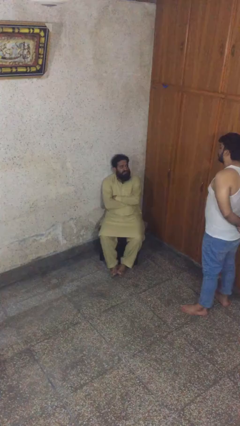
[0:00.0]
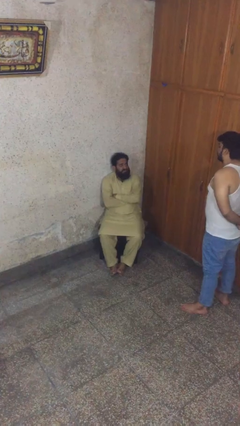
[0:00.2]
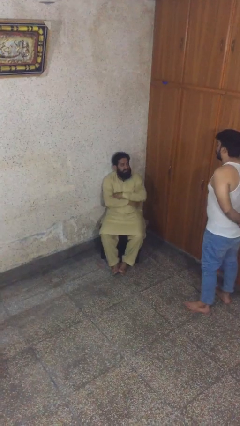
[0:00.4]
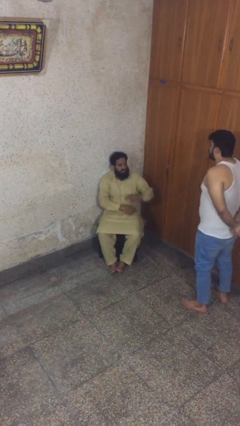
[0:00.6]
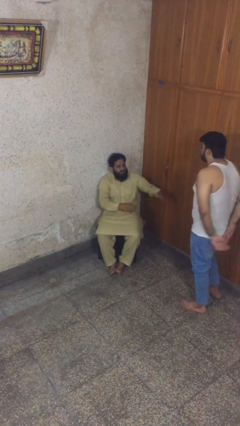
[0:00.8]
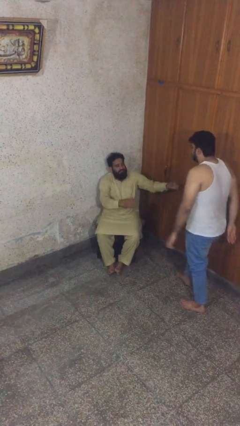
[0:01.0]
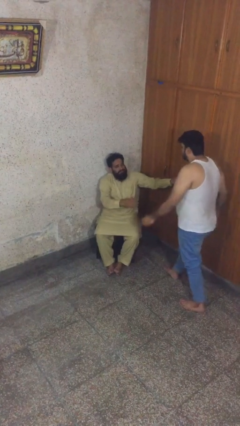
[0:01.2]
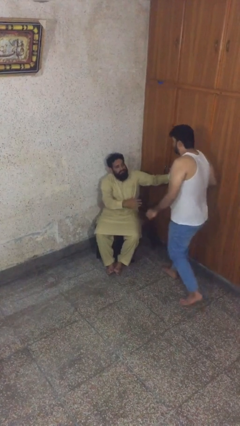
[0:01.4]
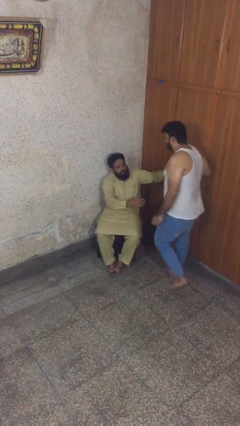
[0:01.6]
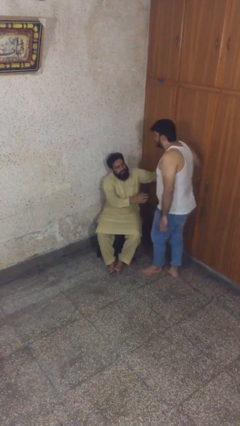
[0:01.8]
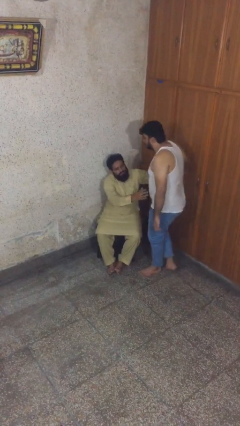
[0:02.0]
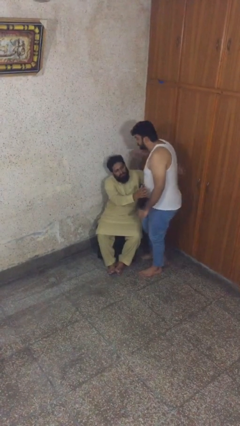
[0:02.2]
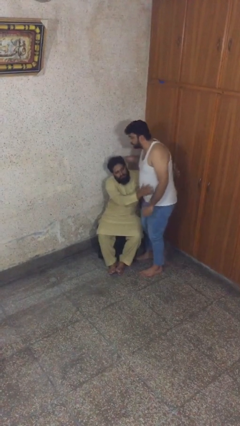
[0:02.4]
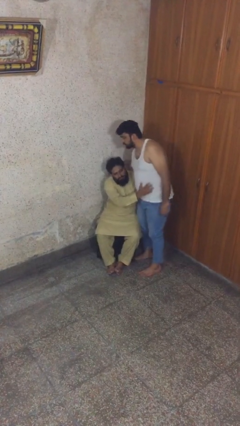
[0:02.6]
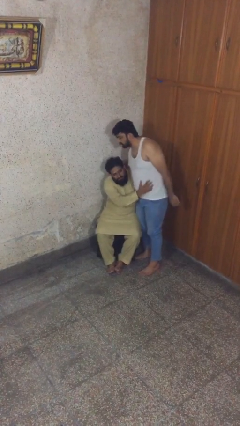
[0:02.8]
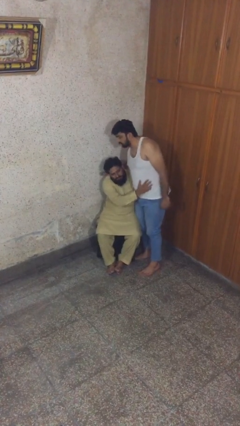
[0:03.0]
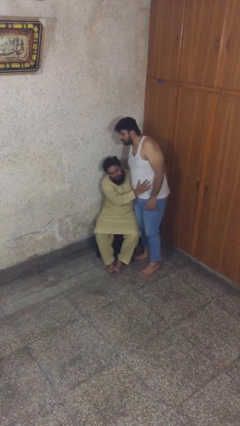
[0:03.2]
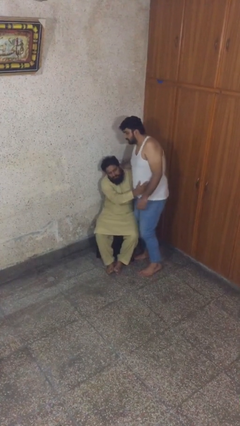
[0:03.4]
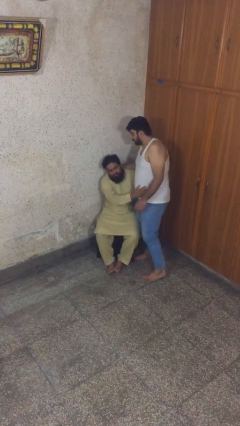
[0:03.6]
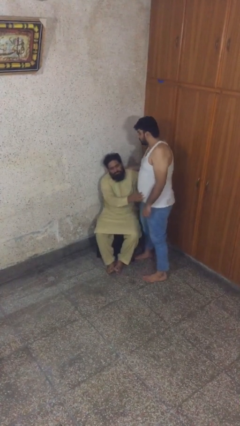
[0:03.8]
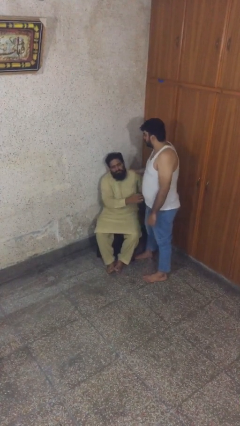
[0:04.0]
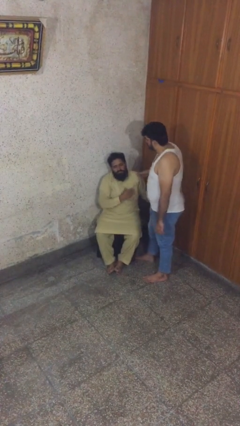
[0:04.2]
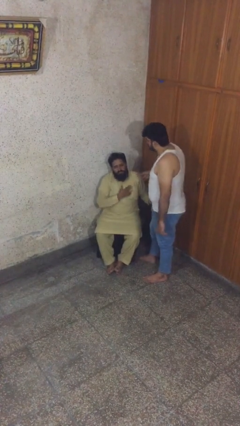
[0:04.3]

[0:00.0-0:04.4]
person embraces person

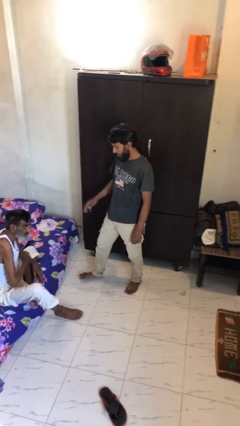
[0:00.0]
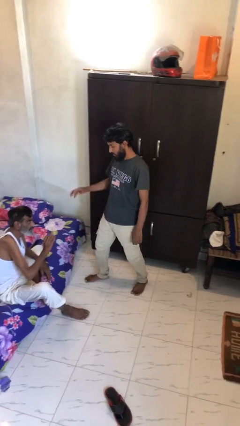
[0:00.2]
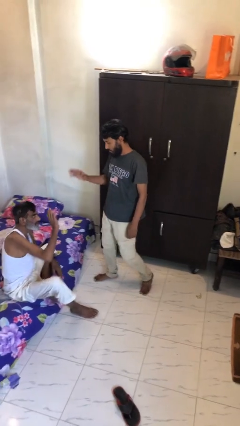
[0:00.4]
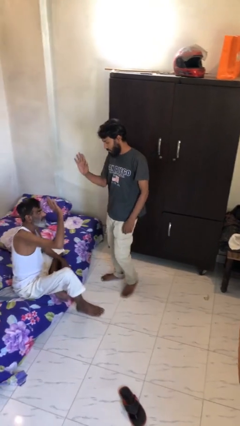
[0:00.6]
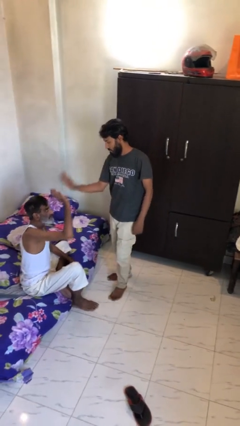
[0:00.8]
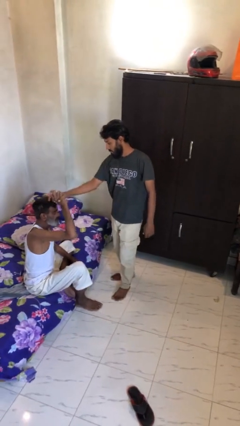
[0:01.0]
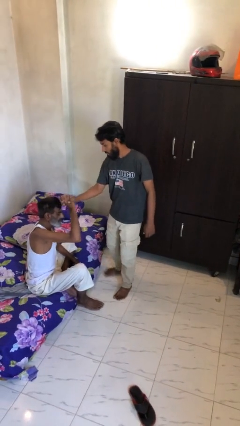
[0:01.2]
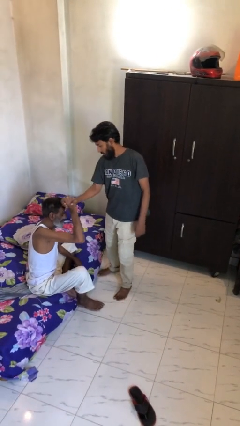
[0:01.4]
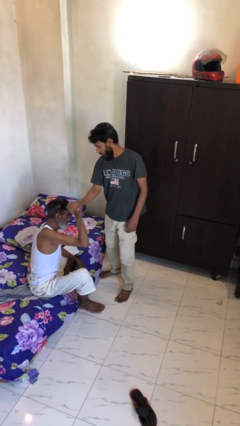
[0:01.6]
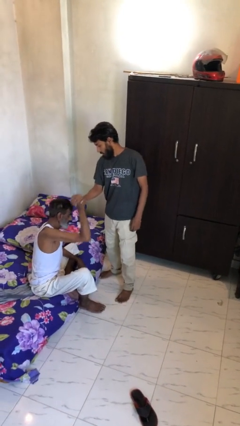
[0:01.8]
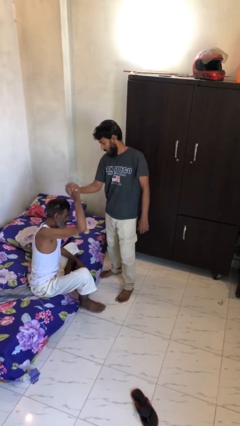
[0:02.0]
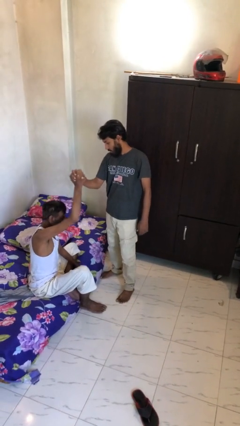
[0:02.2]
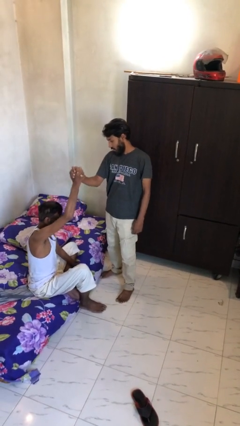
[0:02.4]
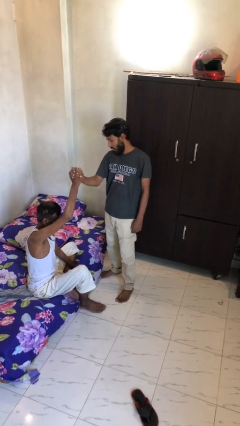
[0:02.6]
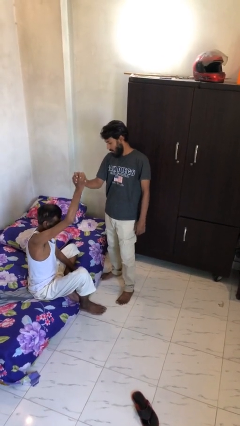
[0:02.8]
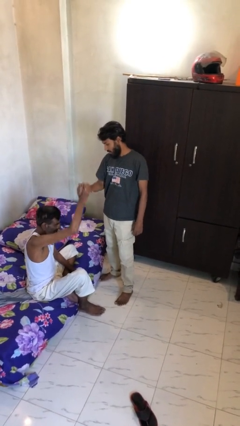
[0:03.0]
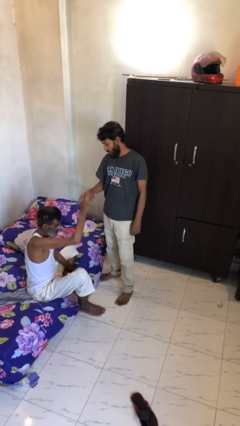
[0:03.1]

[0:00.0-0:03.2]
person highfives hand

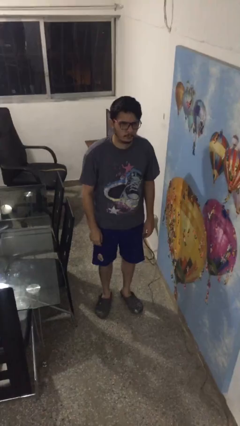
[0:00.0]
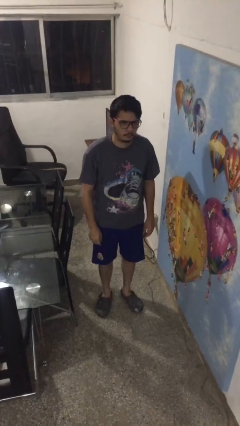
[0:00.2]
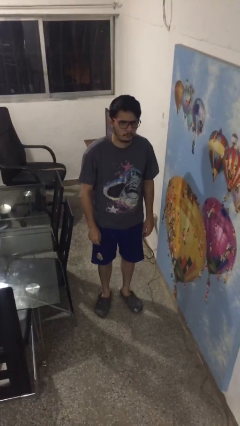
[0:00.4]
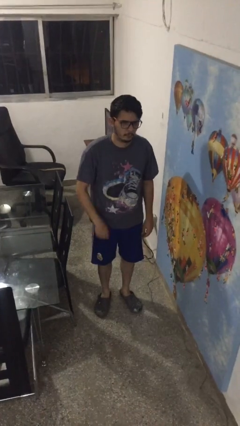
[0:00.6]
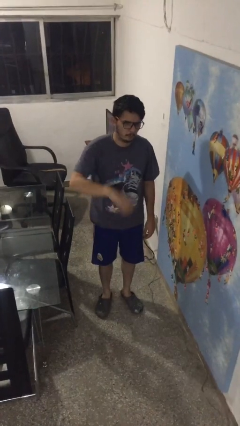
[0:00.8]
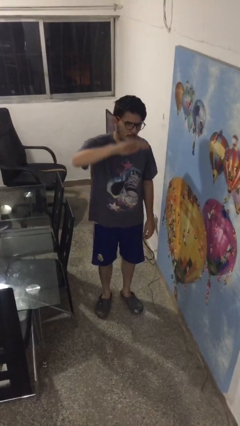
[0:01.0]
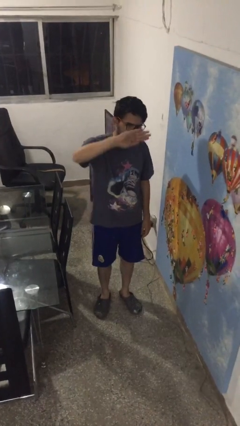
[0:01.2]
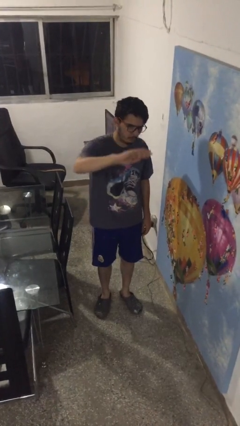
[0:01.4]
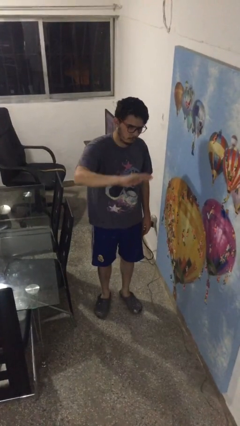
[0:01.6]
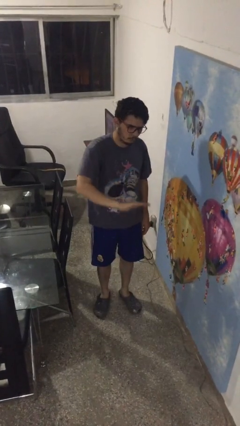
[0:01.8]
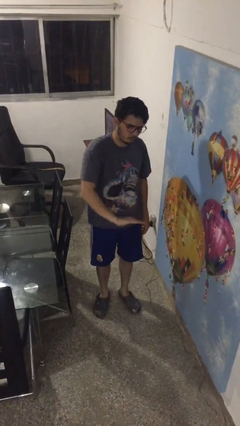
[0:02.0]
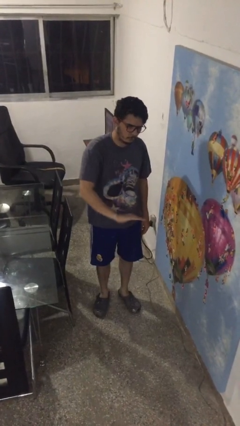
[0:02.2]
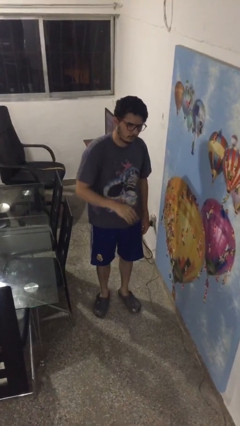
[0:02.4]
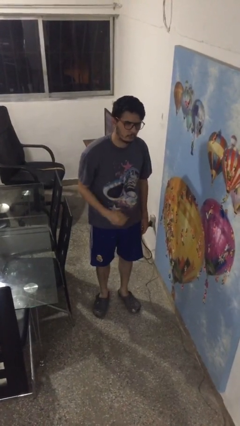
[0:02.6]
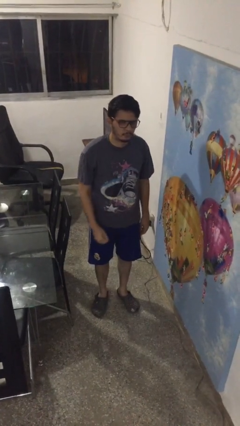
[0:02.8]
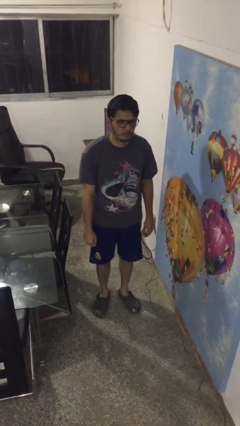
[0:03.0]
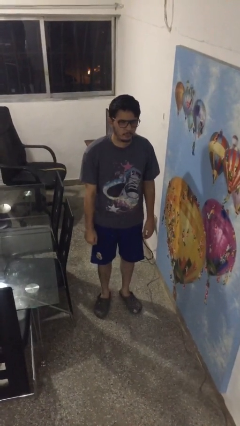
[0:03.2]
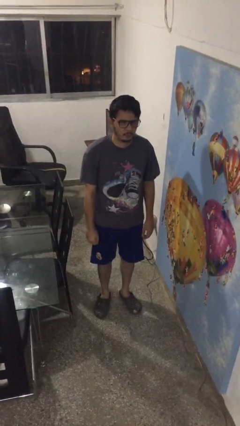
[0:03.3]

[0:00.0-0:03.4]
person gestures swipe down

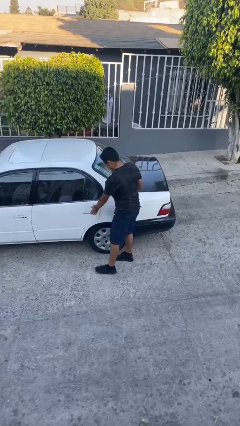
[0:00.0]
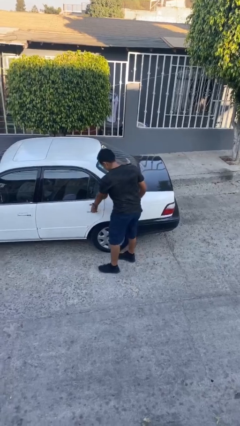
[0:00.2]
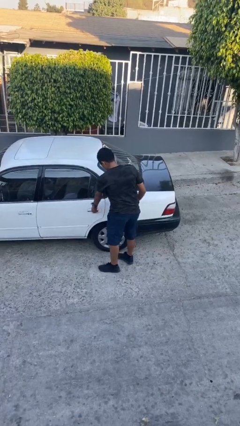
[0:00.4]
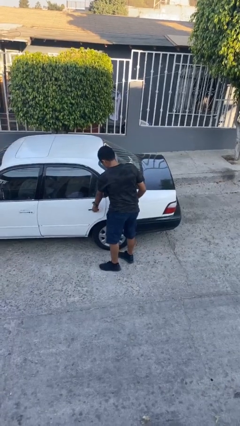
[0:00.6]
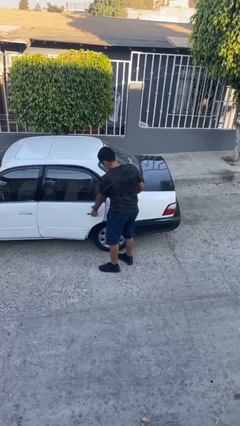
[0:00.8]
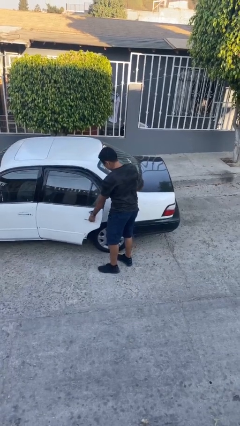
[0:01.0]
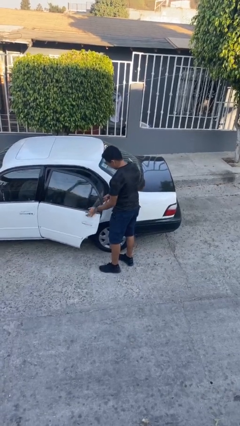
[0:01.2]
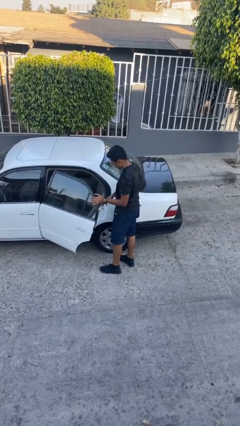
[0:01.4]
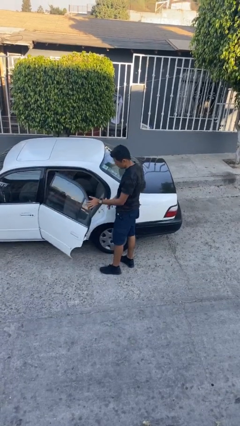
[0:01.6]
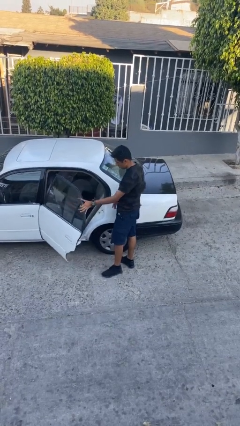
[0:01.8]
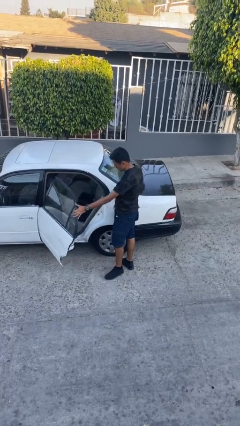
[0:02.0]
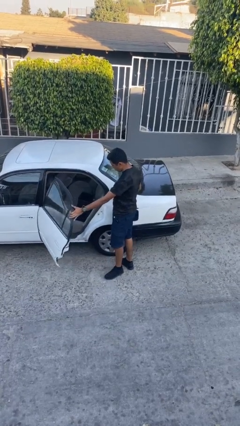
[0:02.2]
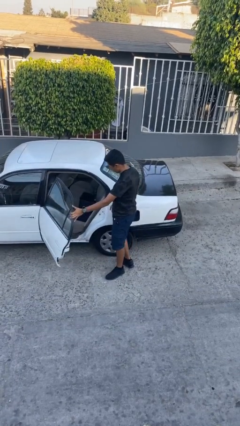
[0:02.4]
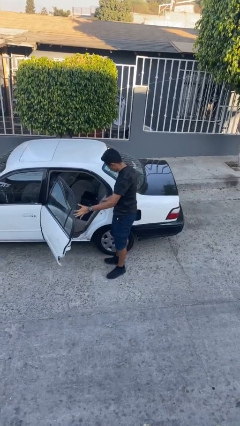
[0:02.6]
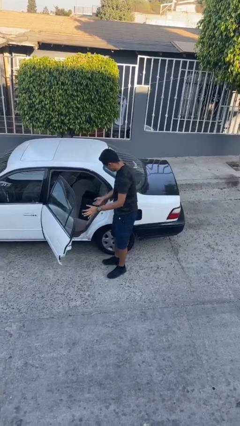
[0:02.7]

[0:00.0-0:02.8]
person opens car door

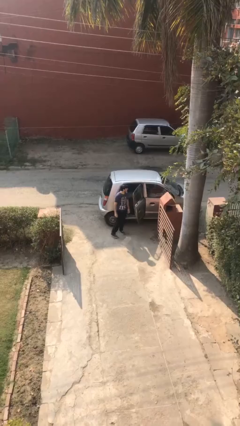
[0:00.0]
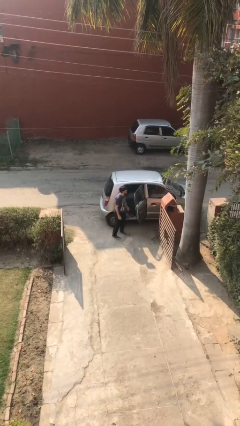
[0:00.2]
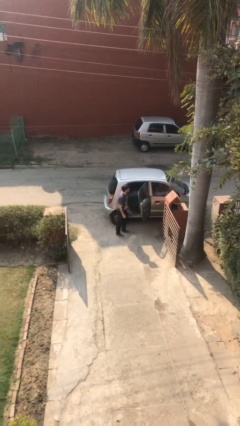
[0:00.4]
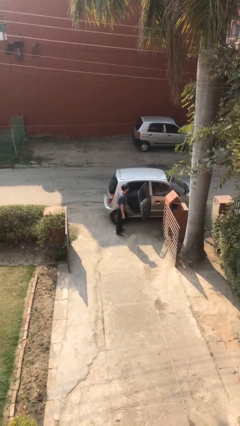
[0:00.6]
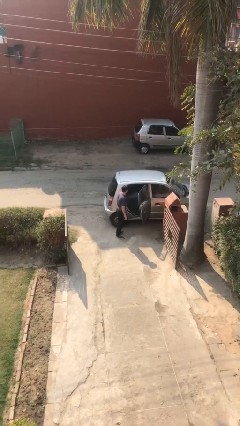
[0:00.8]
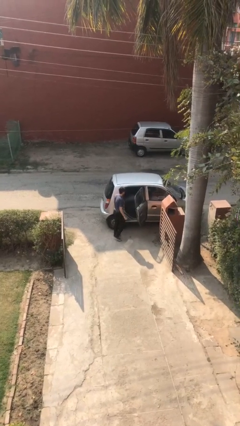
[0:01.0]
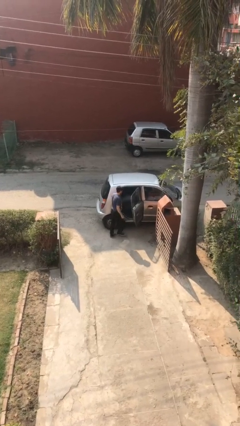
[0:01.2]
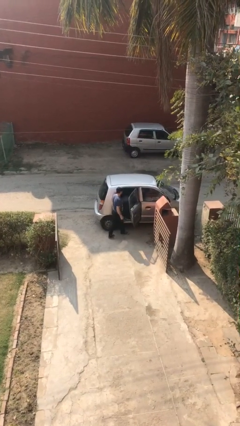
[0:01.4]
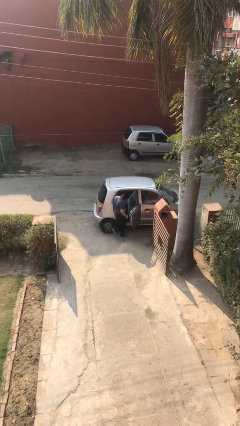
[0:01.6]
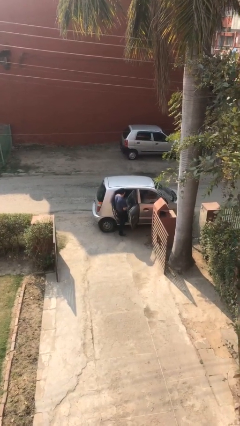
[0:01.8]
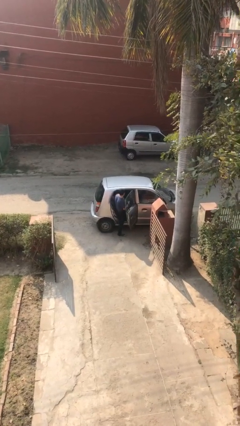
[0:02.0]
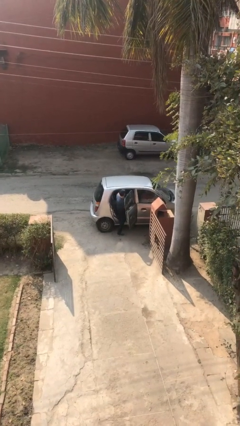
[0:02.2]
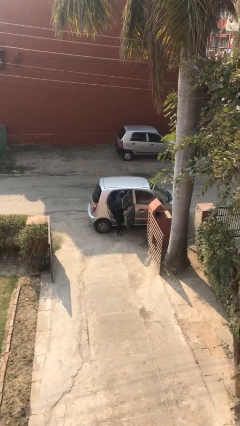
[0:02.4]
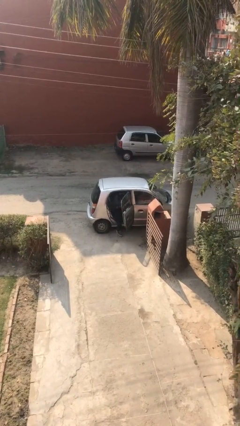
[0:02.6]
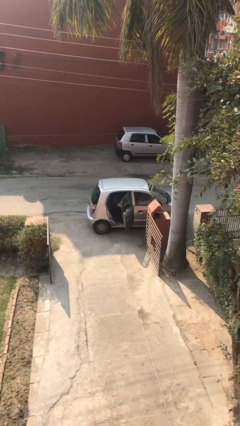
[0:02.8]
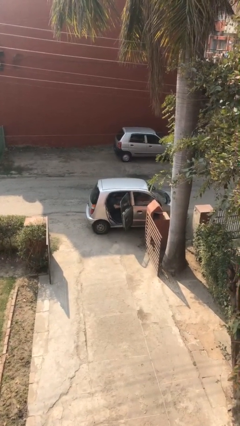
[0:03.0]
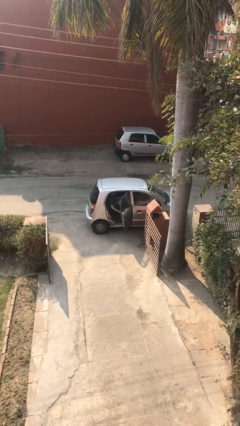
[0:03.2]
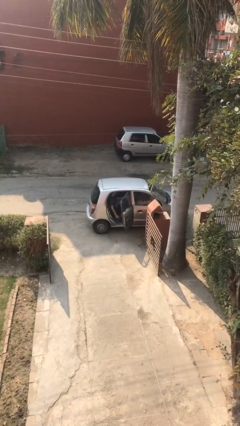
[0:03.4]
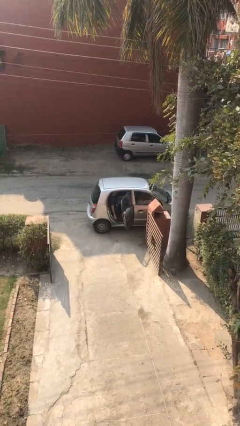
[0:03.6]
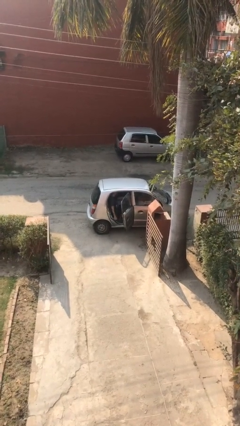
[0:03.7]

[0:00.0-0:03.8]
person enters car

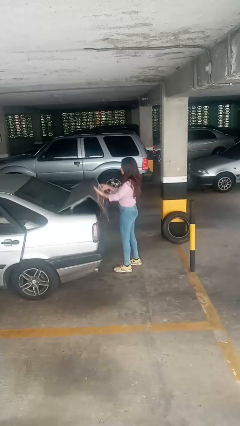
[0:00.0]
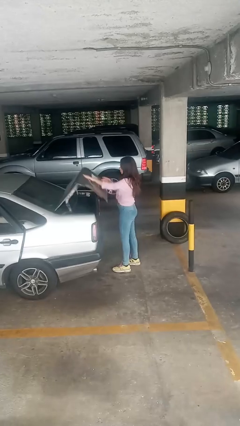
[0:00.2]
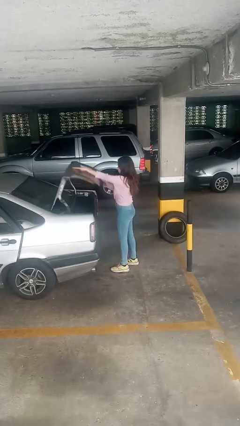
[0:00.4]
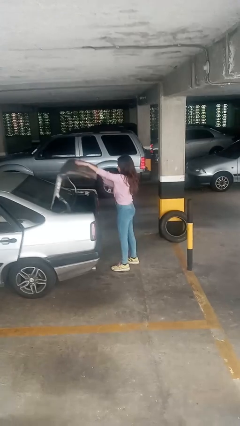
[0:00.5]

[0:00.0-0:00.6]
person opens car trunk
